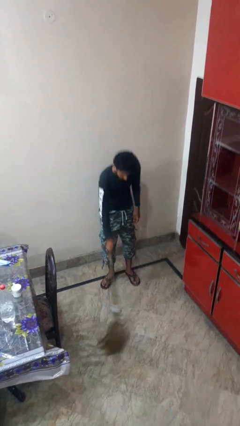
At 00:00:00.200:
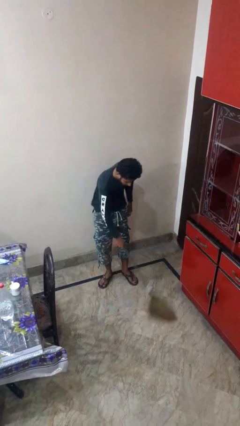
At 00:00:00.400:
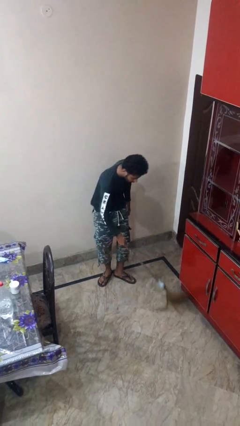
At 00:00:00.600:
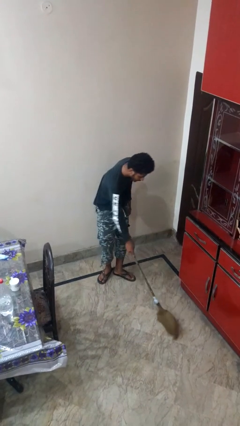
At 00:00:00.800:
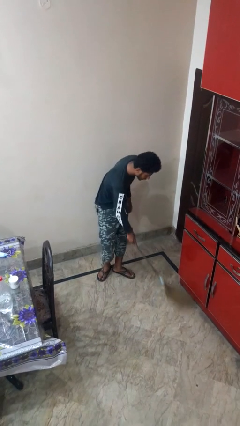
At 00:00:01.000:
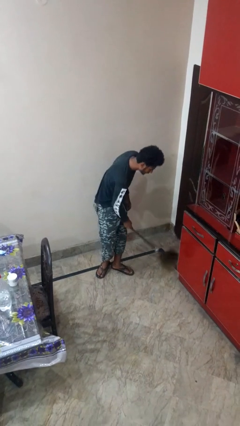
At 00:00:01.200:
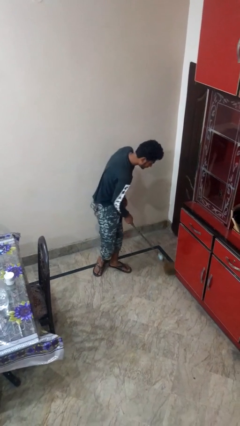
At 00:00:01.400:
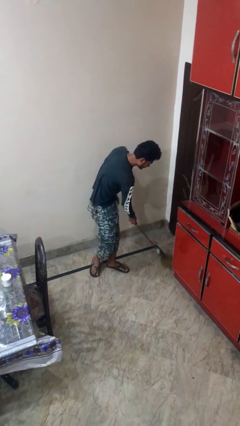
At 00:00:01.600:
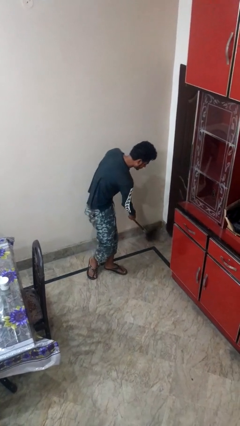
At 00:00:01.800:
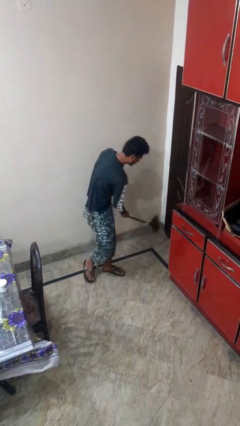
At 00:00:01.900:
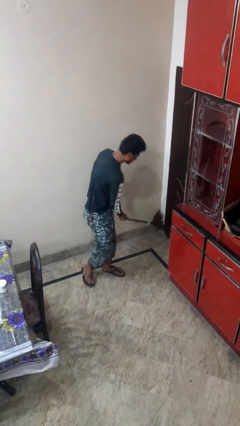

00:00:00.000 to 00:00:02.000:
person sweeps floor

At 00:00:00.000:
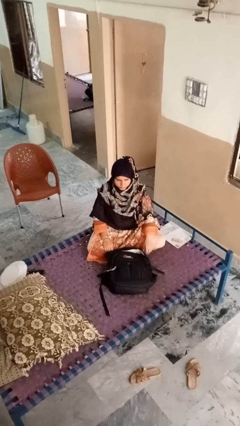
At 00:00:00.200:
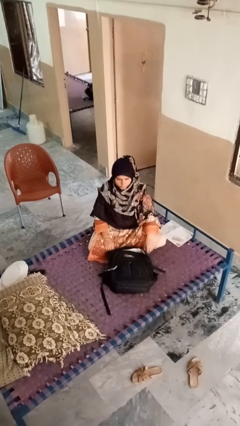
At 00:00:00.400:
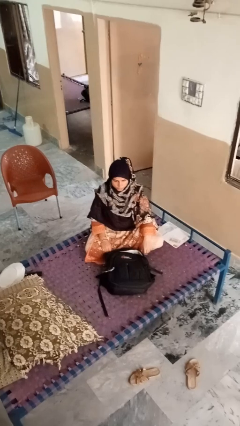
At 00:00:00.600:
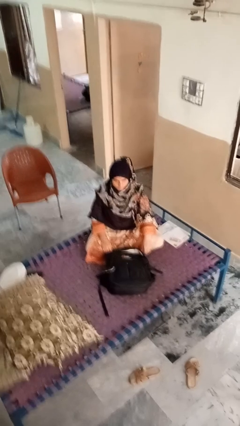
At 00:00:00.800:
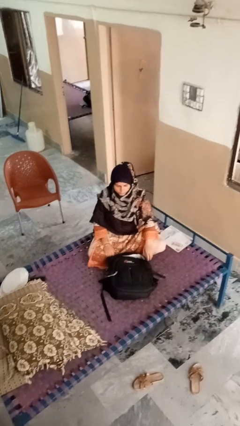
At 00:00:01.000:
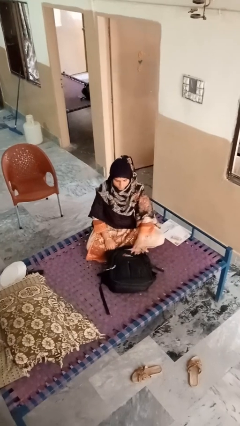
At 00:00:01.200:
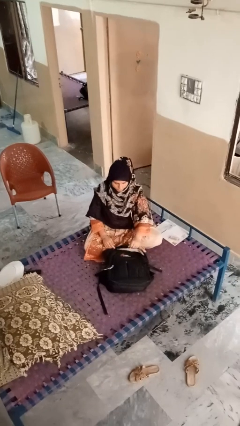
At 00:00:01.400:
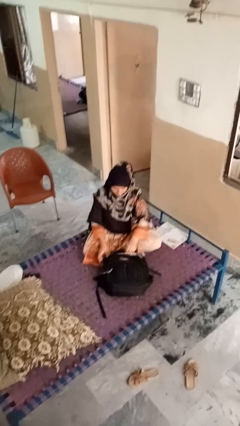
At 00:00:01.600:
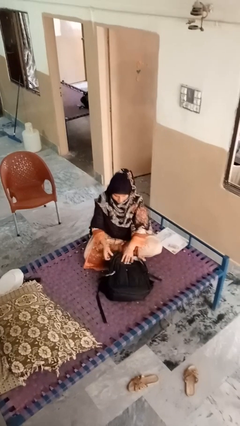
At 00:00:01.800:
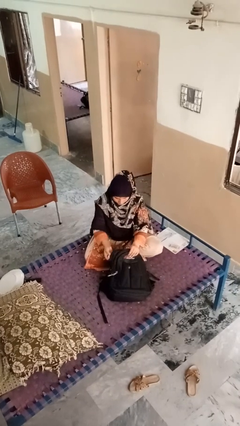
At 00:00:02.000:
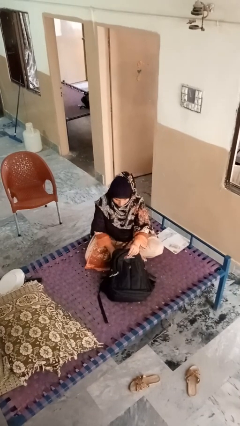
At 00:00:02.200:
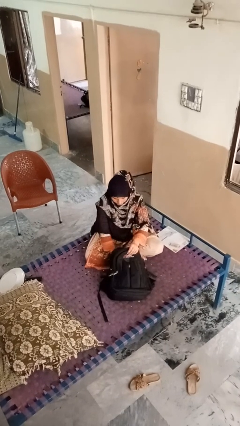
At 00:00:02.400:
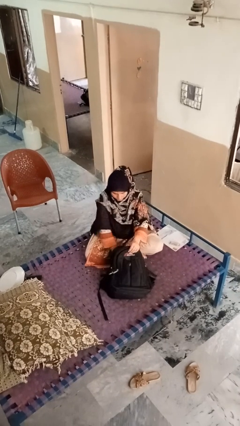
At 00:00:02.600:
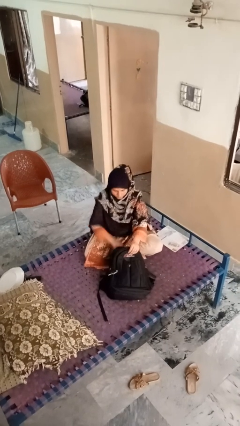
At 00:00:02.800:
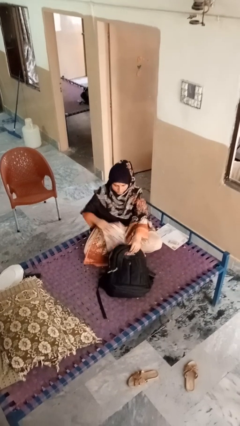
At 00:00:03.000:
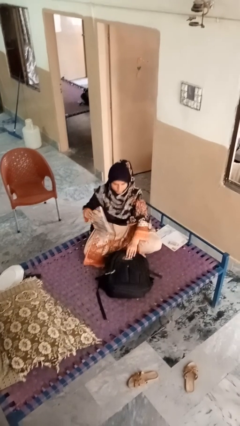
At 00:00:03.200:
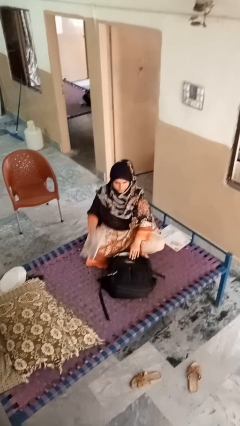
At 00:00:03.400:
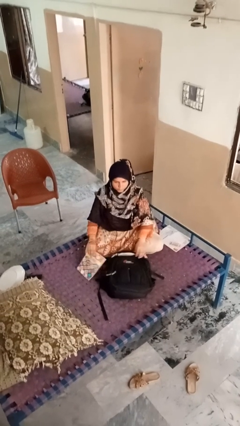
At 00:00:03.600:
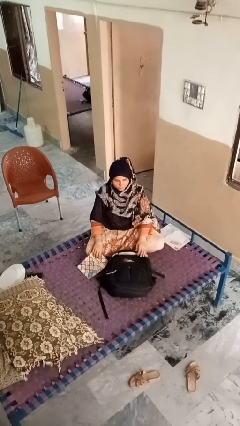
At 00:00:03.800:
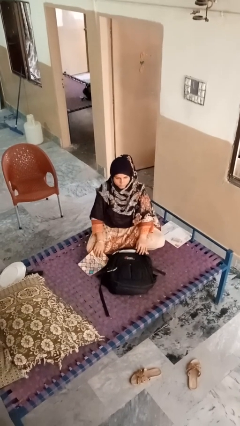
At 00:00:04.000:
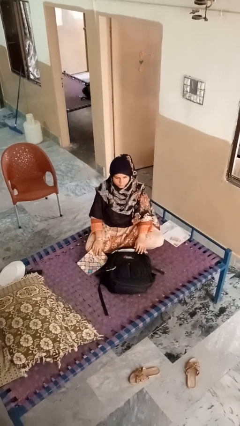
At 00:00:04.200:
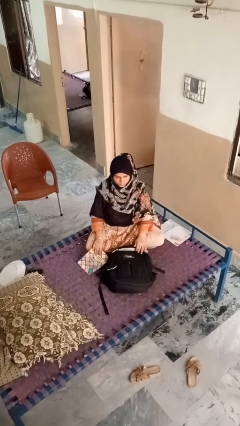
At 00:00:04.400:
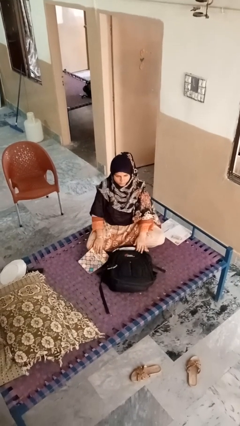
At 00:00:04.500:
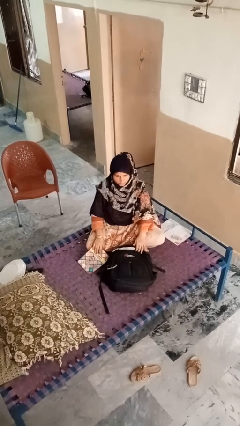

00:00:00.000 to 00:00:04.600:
person takes object from bag

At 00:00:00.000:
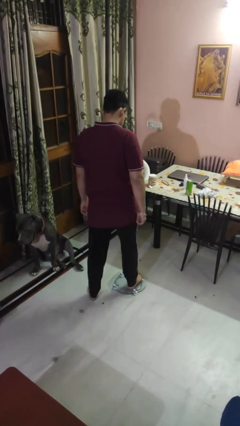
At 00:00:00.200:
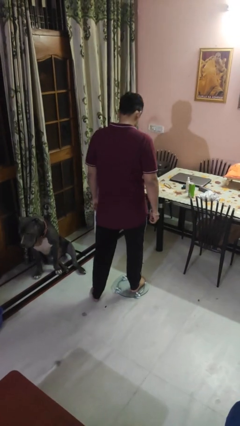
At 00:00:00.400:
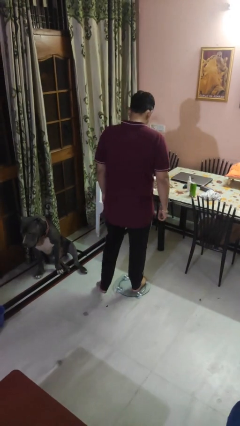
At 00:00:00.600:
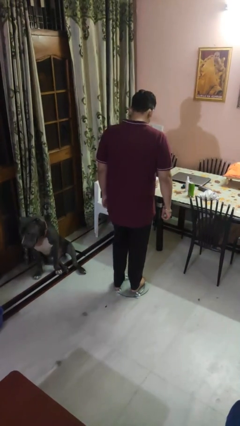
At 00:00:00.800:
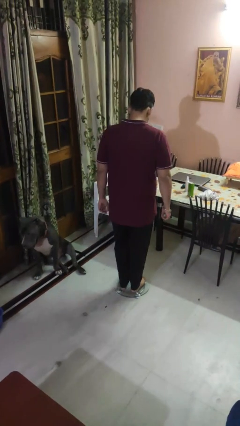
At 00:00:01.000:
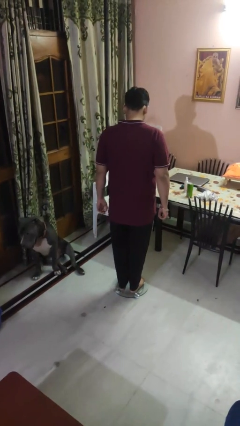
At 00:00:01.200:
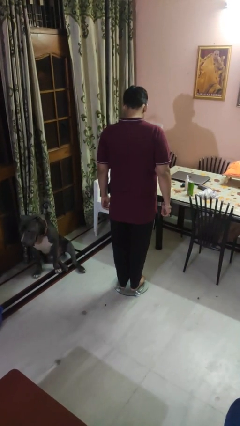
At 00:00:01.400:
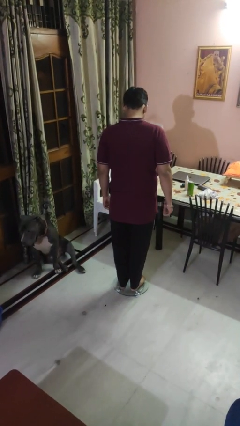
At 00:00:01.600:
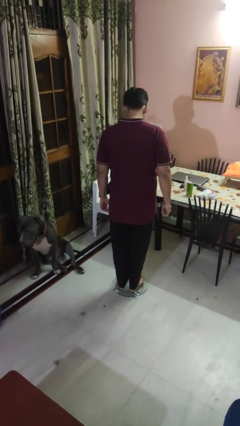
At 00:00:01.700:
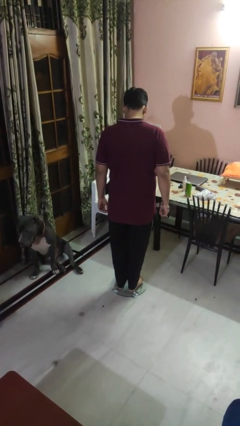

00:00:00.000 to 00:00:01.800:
person uses bodyweight scale

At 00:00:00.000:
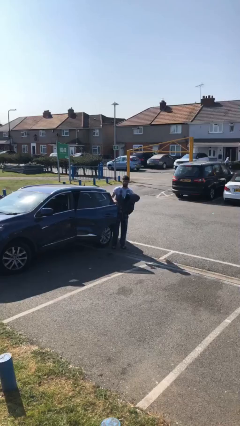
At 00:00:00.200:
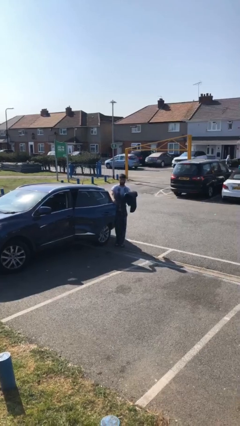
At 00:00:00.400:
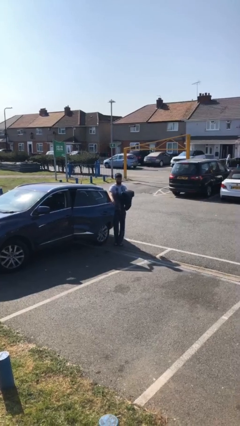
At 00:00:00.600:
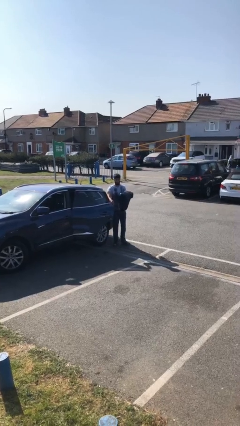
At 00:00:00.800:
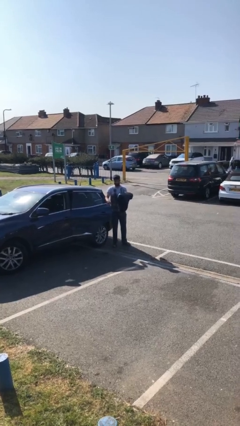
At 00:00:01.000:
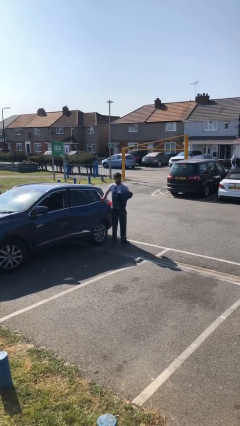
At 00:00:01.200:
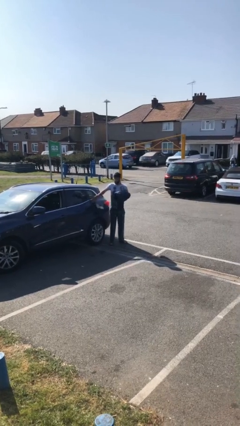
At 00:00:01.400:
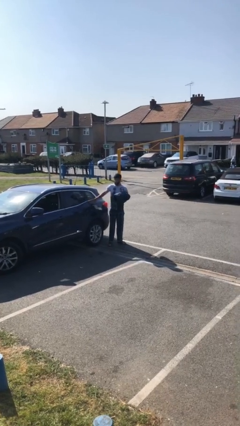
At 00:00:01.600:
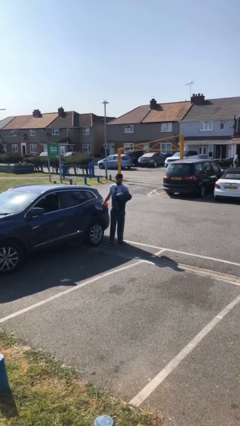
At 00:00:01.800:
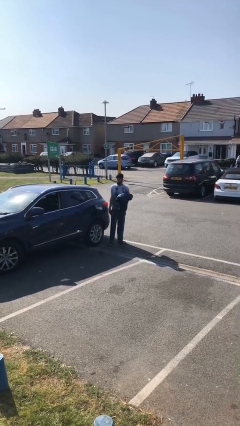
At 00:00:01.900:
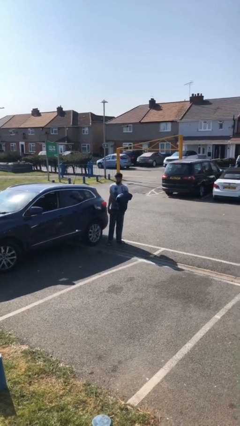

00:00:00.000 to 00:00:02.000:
person closes car door

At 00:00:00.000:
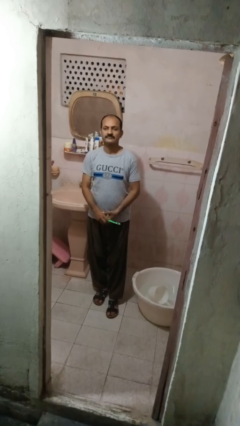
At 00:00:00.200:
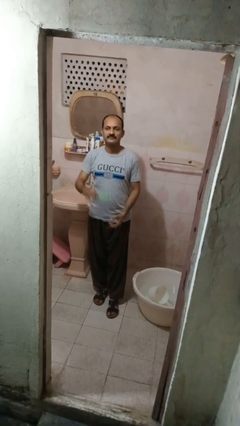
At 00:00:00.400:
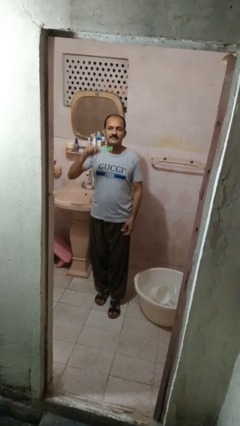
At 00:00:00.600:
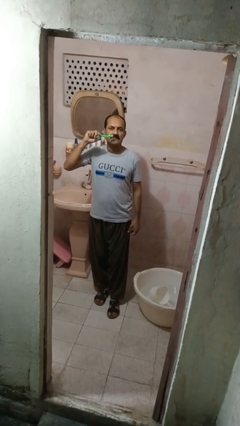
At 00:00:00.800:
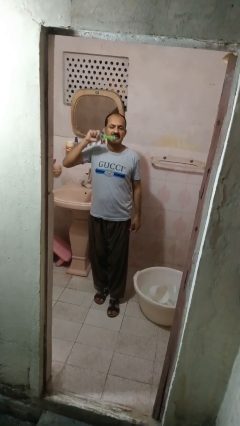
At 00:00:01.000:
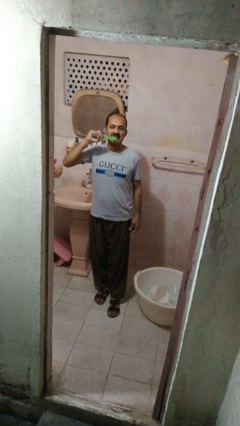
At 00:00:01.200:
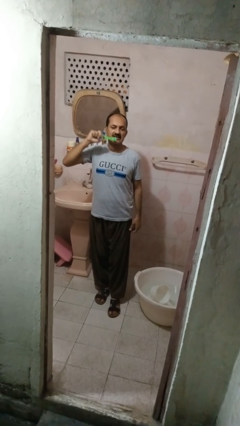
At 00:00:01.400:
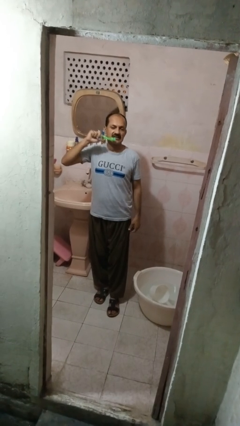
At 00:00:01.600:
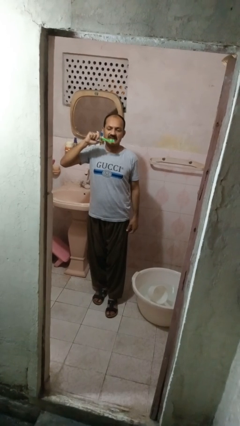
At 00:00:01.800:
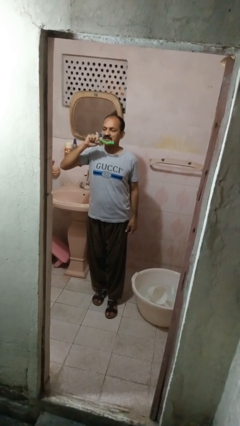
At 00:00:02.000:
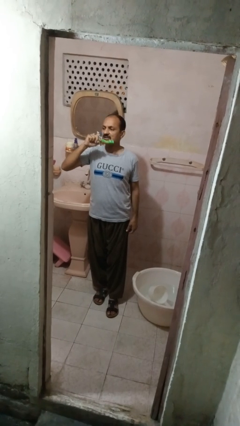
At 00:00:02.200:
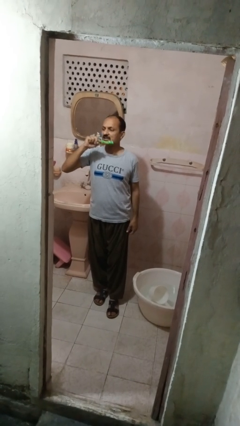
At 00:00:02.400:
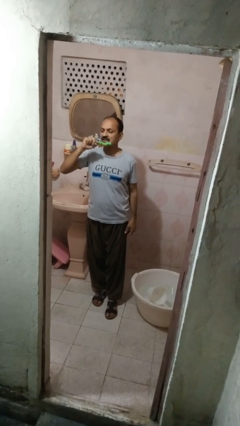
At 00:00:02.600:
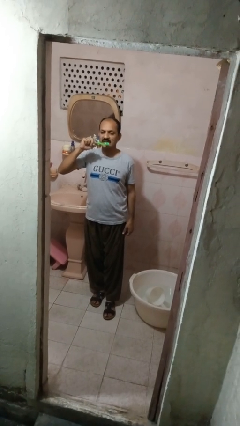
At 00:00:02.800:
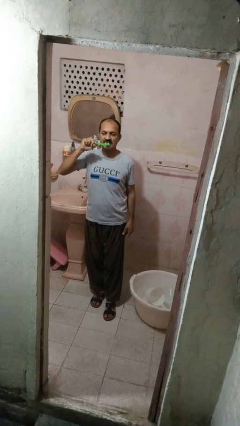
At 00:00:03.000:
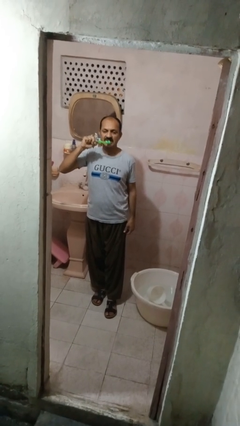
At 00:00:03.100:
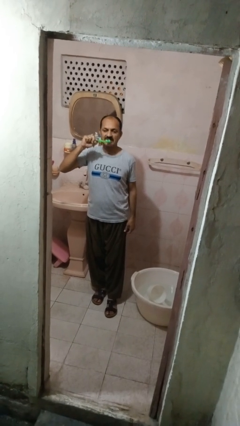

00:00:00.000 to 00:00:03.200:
person brushes teeth

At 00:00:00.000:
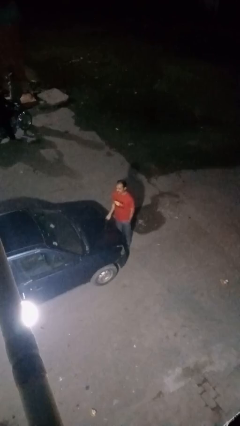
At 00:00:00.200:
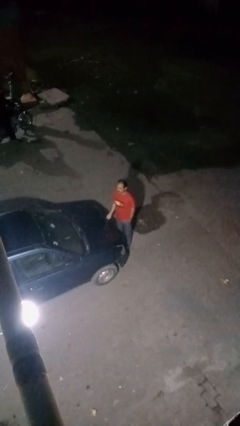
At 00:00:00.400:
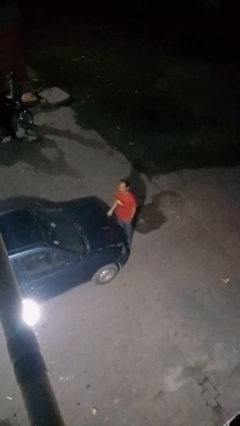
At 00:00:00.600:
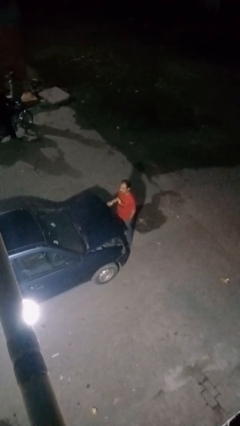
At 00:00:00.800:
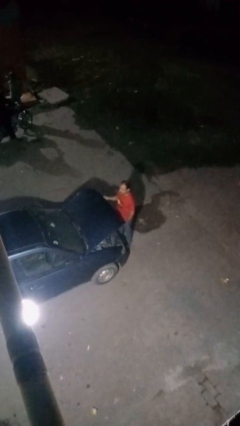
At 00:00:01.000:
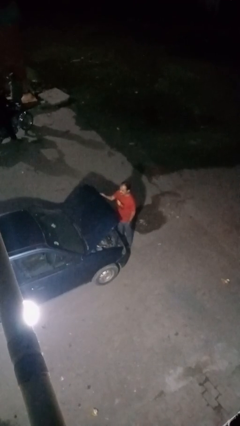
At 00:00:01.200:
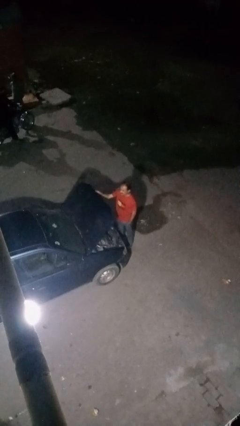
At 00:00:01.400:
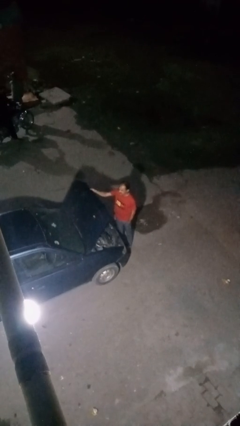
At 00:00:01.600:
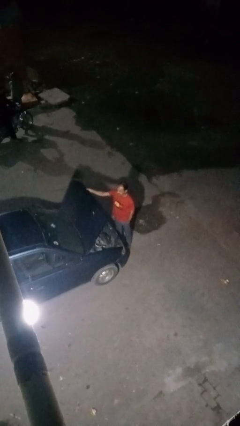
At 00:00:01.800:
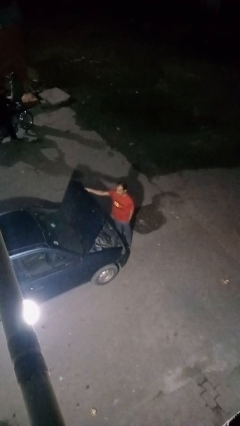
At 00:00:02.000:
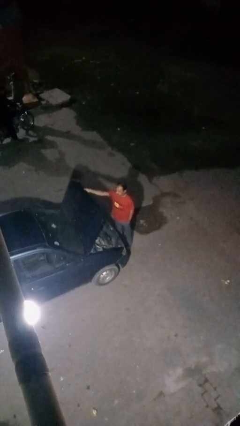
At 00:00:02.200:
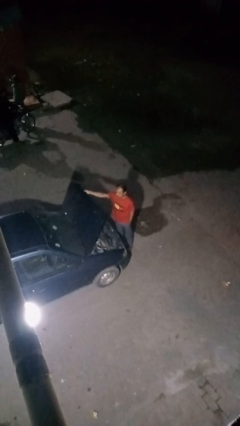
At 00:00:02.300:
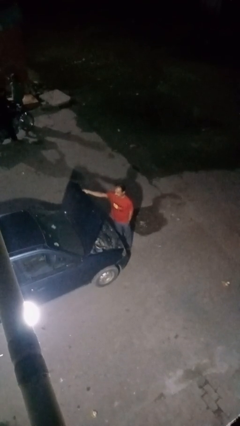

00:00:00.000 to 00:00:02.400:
person opens car hood

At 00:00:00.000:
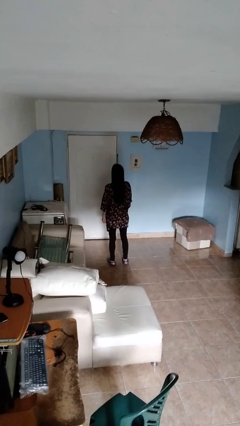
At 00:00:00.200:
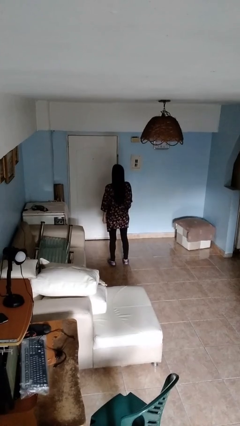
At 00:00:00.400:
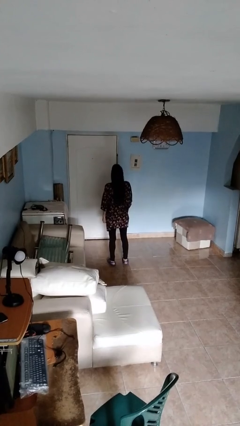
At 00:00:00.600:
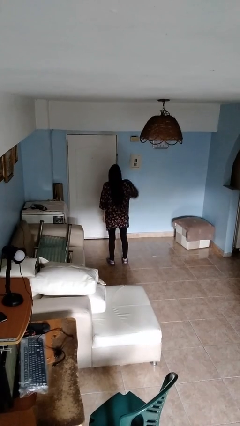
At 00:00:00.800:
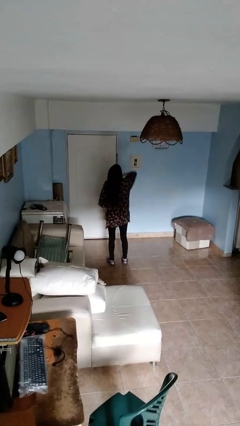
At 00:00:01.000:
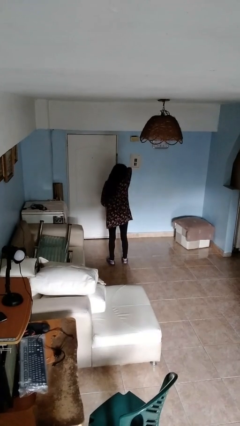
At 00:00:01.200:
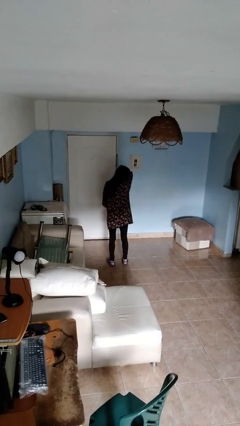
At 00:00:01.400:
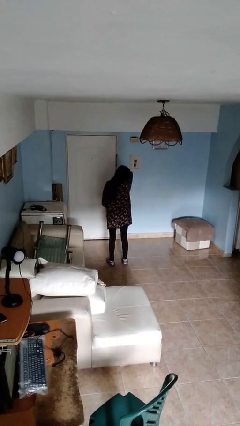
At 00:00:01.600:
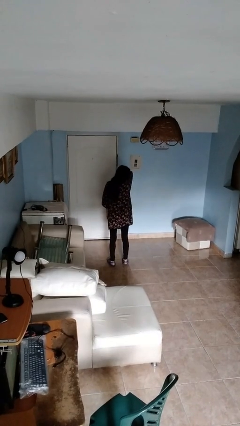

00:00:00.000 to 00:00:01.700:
person sneezes into arm
